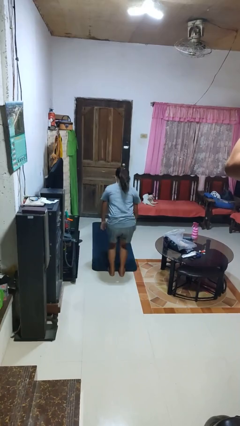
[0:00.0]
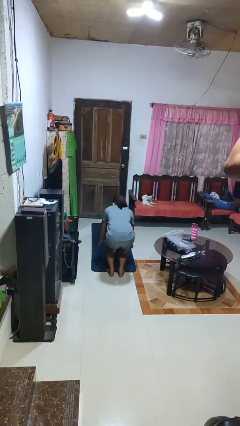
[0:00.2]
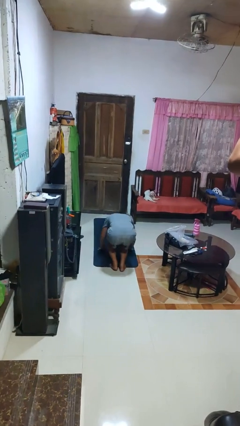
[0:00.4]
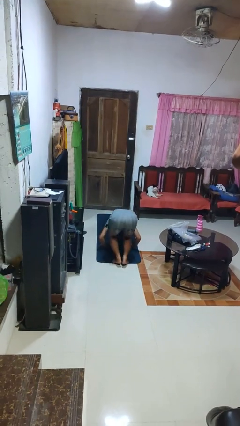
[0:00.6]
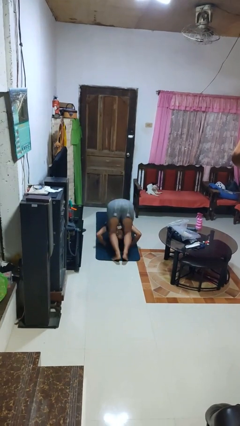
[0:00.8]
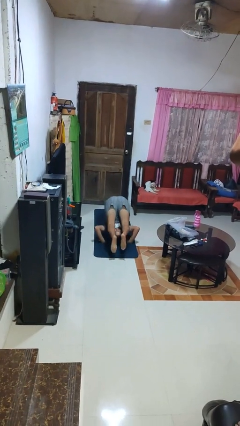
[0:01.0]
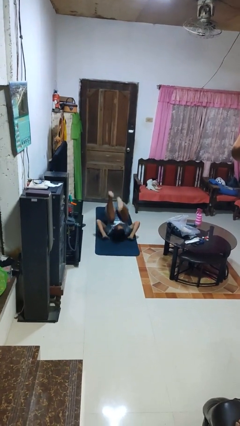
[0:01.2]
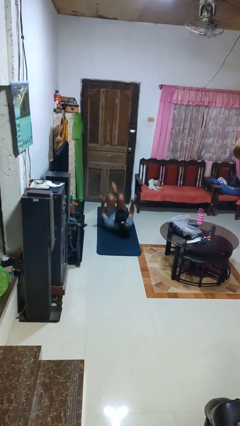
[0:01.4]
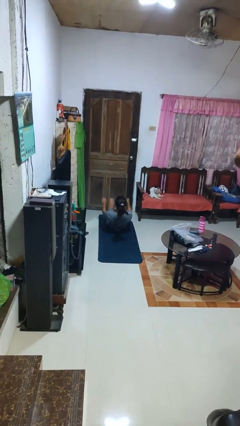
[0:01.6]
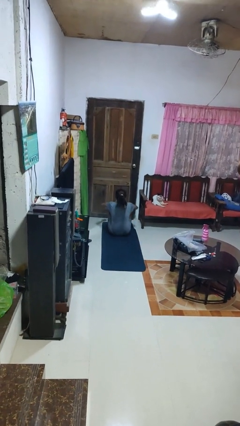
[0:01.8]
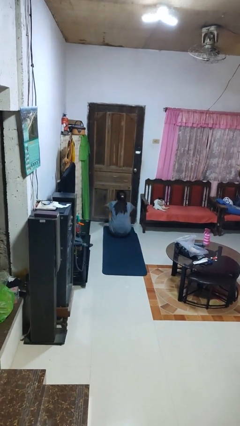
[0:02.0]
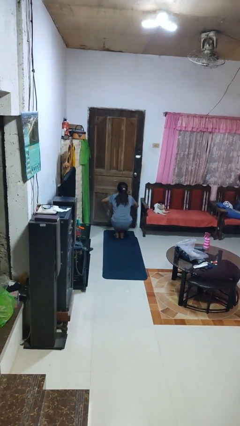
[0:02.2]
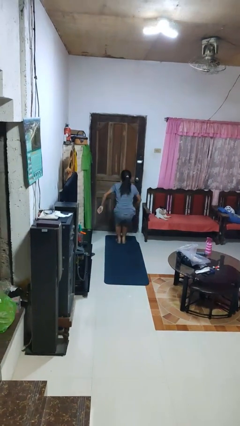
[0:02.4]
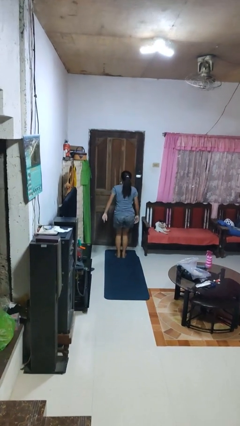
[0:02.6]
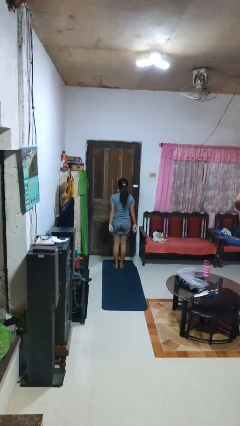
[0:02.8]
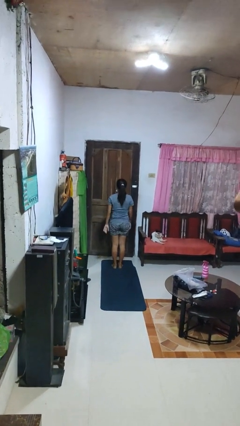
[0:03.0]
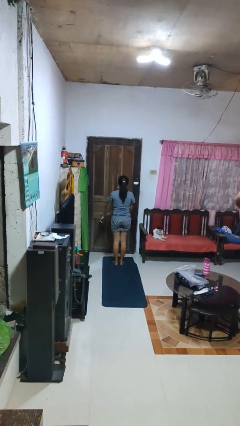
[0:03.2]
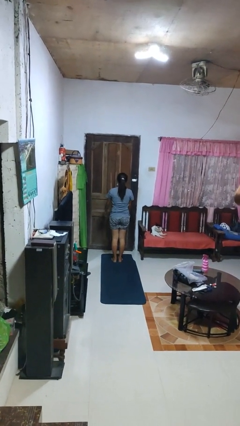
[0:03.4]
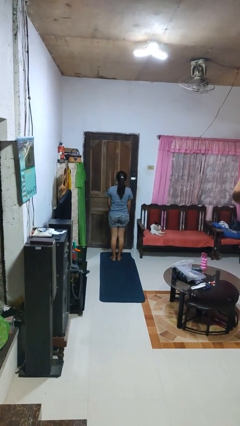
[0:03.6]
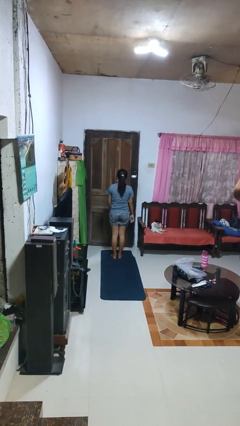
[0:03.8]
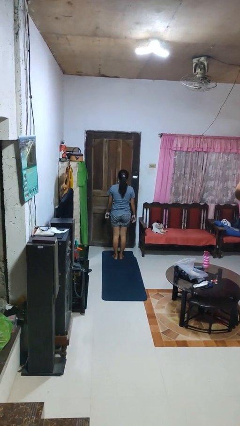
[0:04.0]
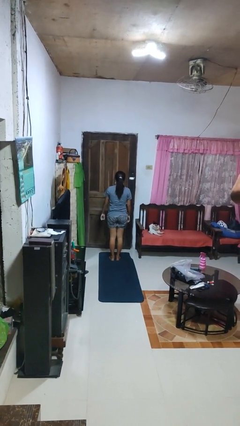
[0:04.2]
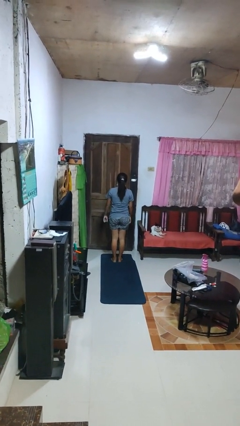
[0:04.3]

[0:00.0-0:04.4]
person somersaults

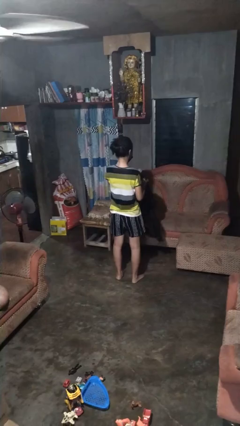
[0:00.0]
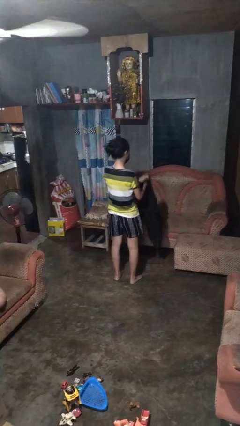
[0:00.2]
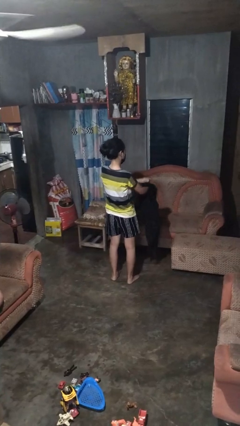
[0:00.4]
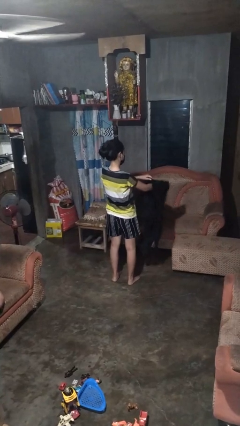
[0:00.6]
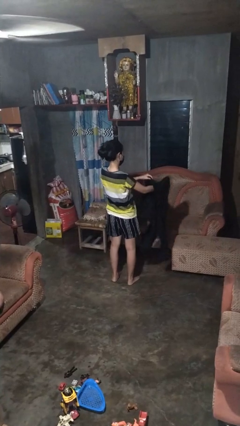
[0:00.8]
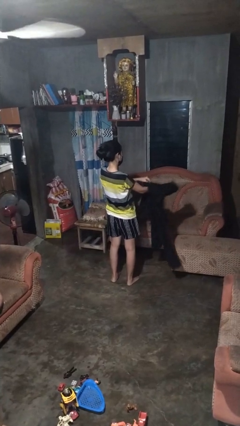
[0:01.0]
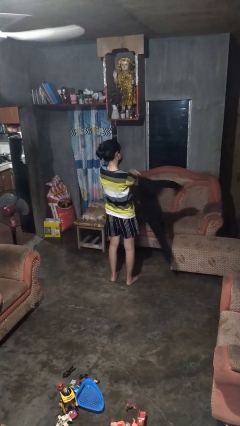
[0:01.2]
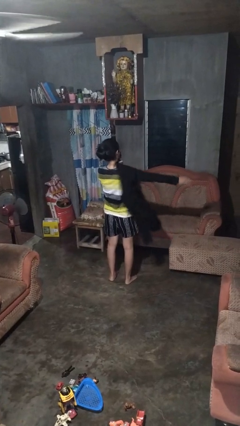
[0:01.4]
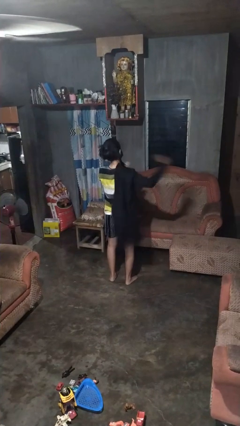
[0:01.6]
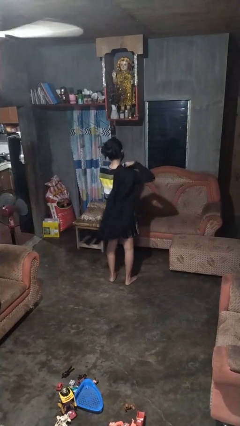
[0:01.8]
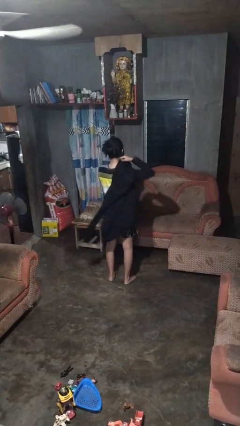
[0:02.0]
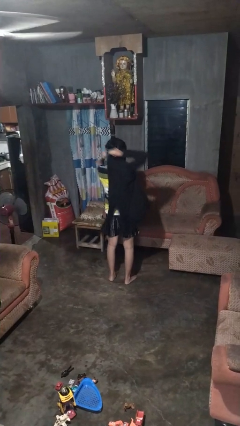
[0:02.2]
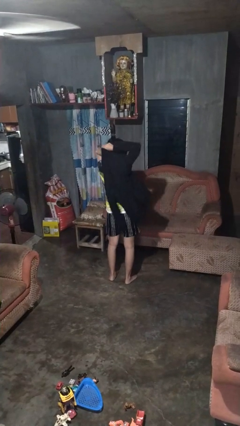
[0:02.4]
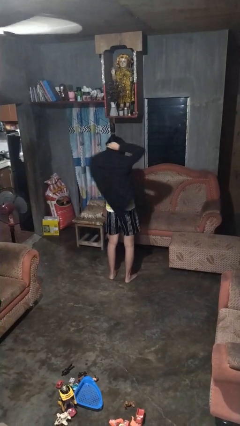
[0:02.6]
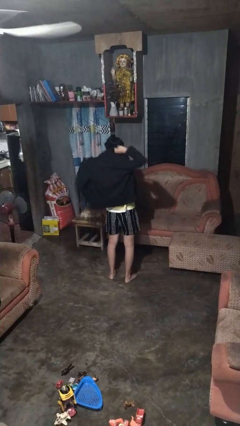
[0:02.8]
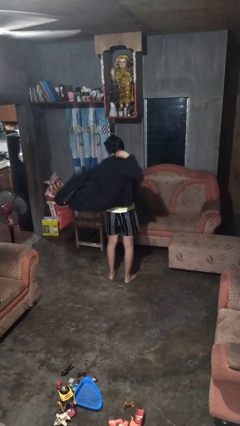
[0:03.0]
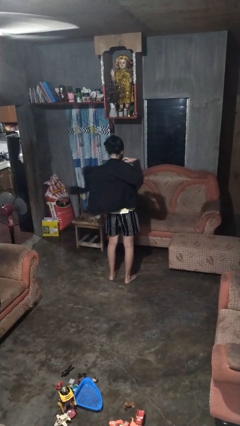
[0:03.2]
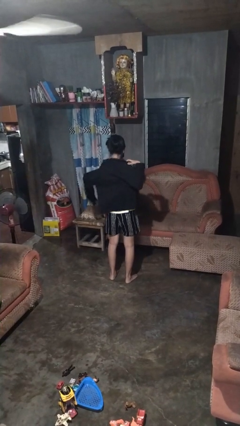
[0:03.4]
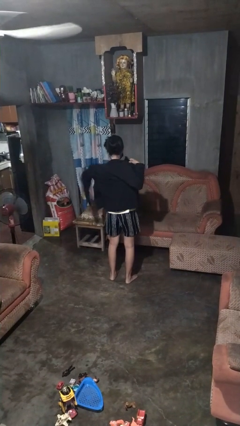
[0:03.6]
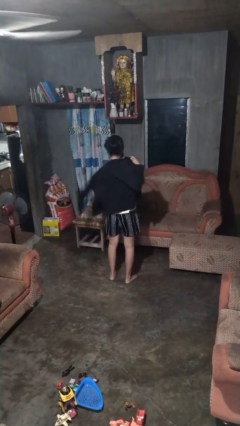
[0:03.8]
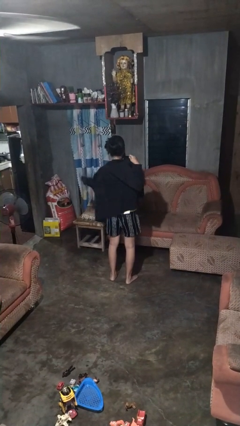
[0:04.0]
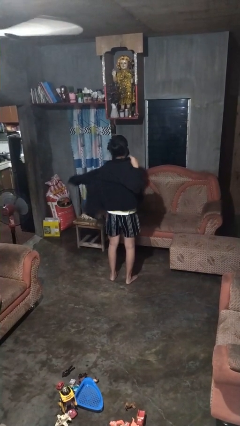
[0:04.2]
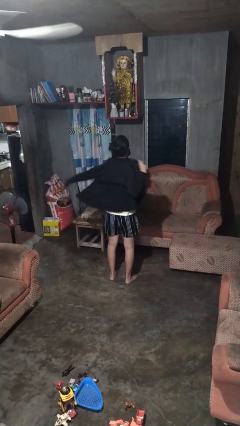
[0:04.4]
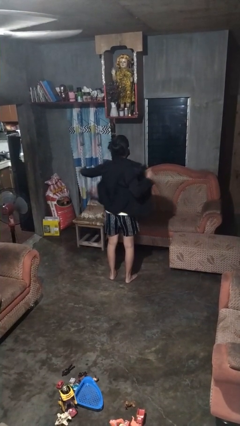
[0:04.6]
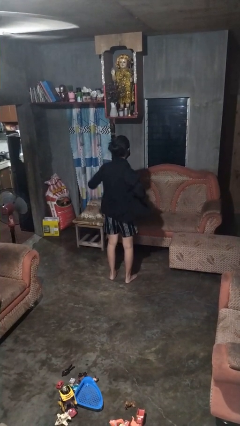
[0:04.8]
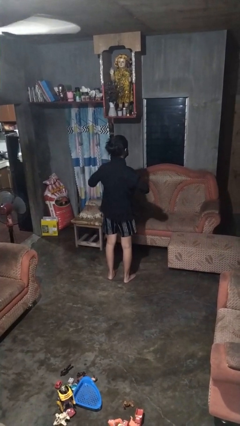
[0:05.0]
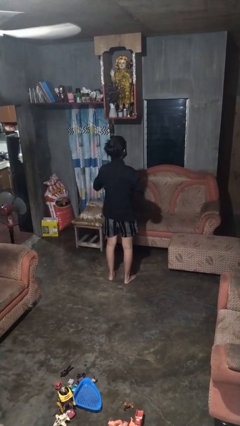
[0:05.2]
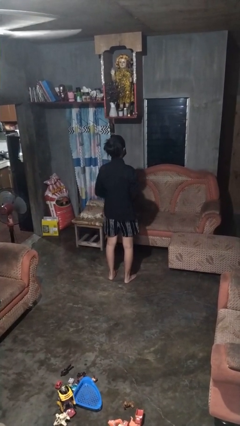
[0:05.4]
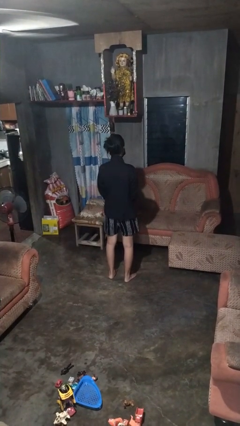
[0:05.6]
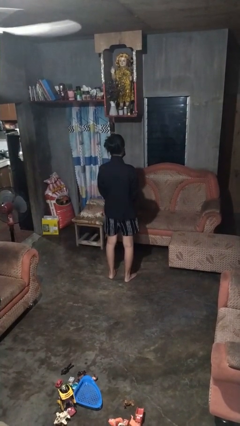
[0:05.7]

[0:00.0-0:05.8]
person puts on shirt

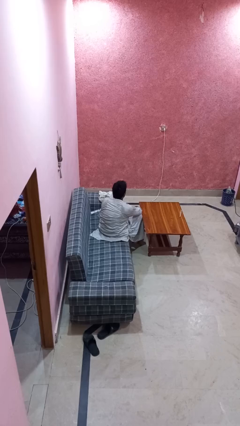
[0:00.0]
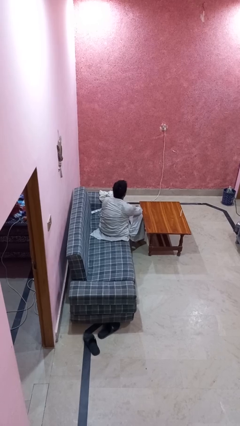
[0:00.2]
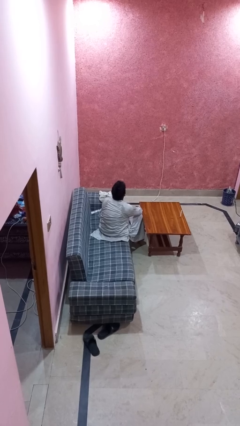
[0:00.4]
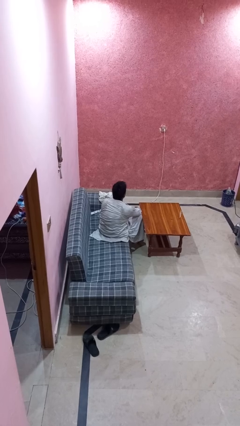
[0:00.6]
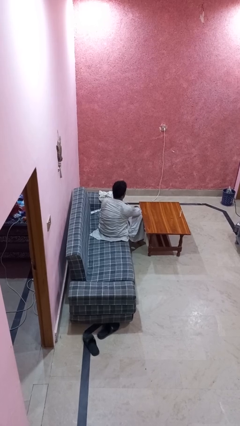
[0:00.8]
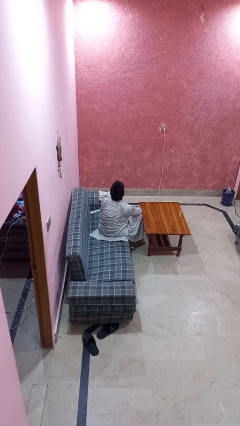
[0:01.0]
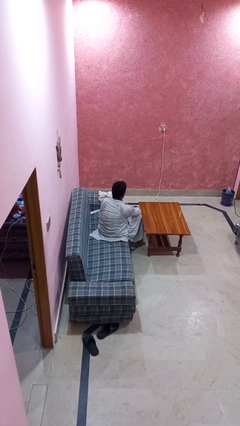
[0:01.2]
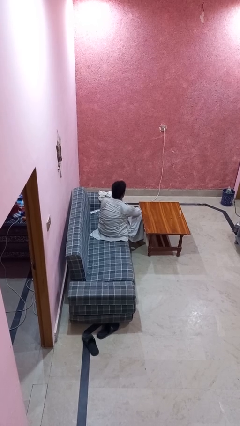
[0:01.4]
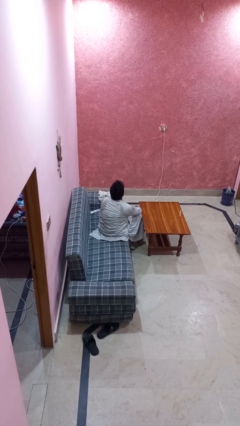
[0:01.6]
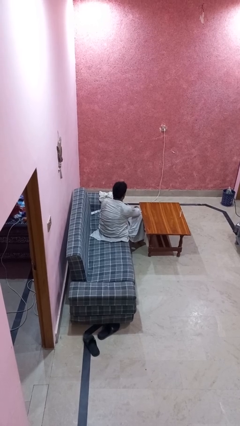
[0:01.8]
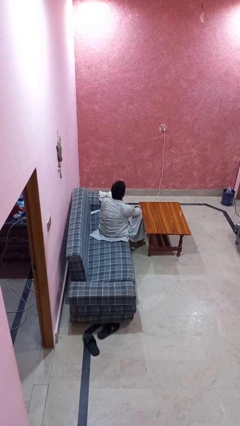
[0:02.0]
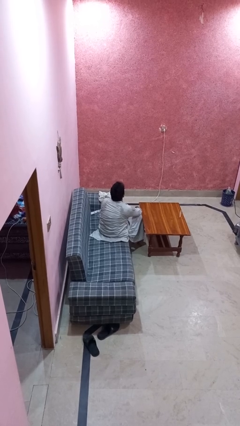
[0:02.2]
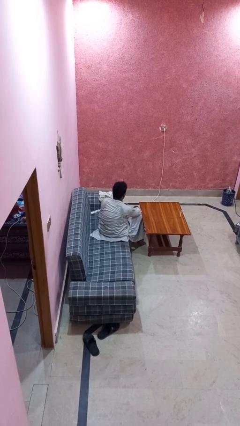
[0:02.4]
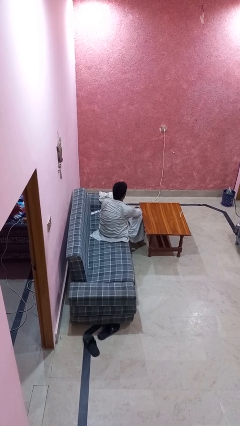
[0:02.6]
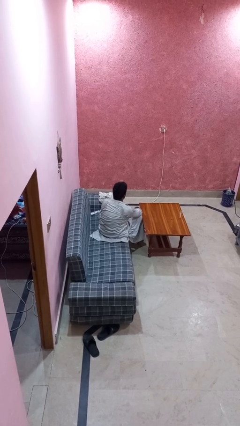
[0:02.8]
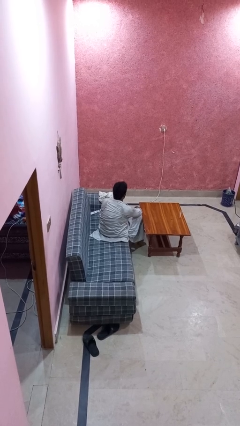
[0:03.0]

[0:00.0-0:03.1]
person nods head

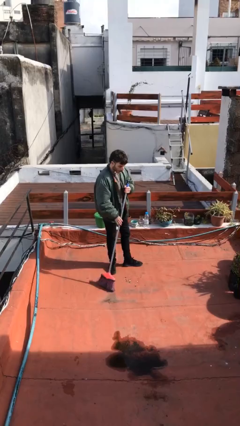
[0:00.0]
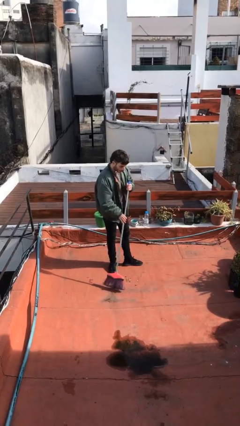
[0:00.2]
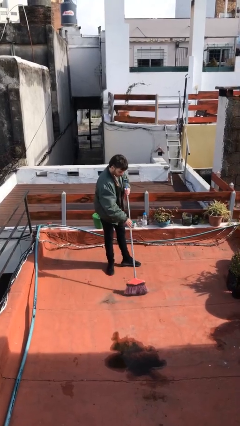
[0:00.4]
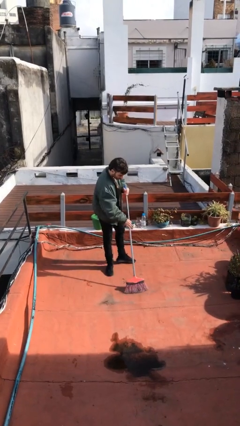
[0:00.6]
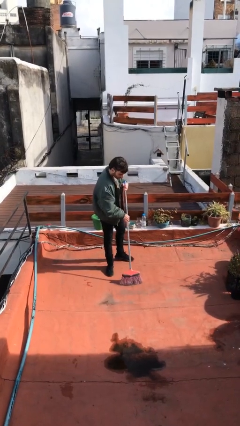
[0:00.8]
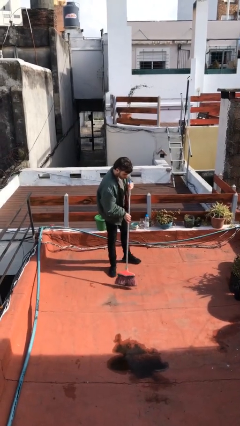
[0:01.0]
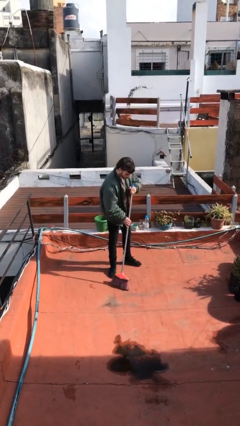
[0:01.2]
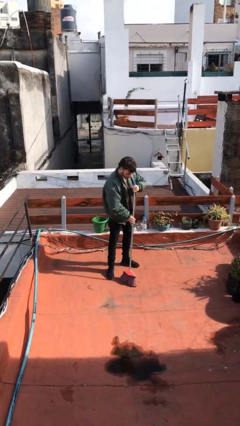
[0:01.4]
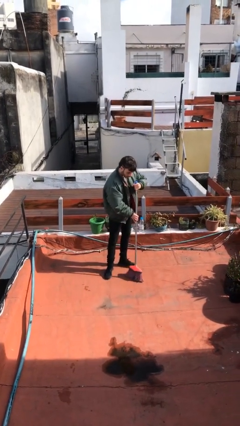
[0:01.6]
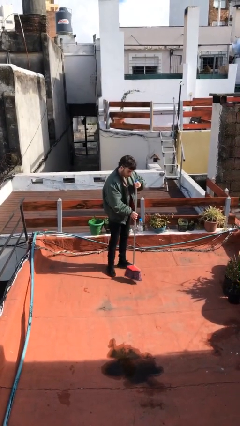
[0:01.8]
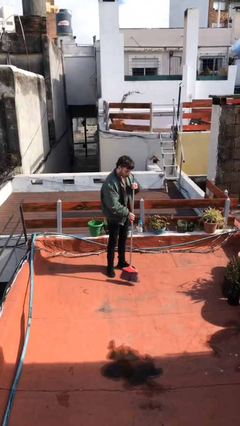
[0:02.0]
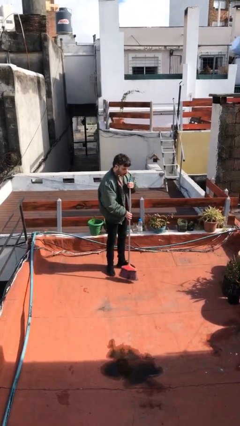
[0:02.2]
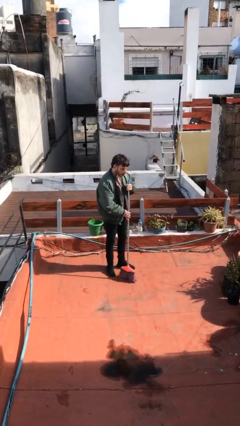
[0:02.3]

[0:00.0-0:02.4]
person sweeps floor

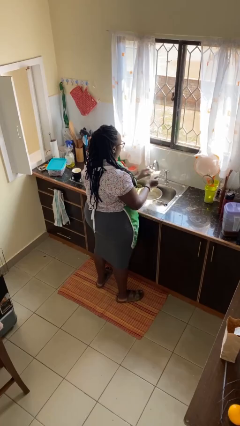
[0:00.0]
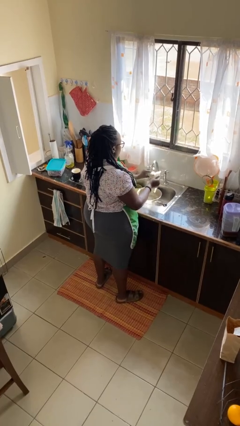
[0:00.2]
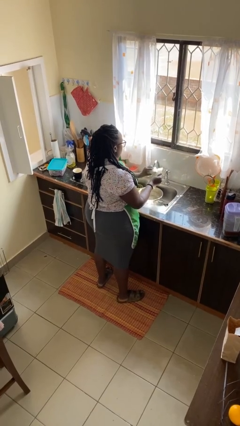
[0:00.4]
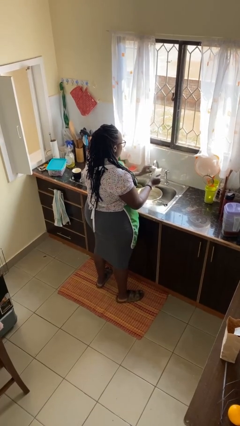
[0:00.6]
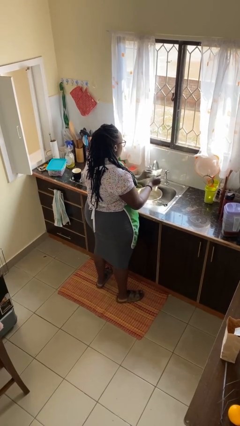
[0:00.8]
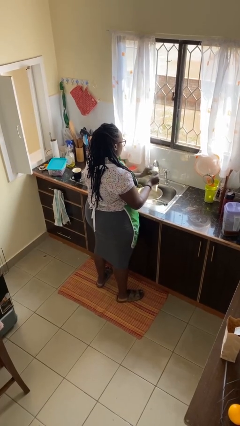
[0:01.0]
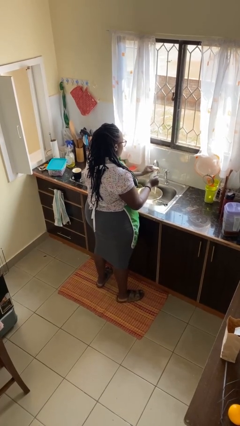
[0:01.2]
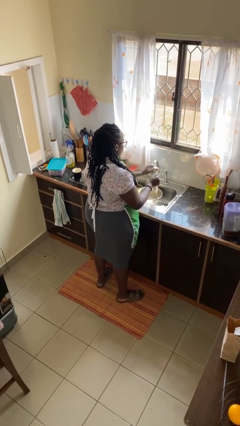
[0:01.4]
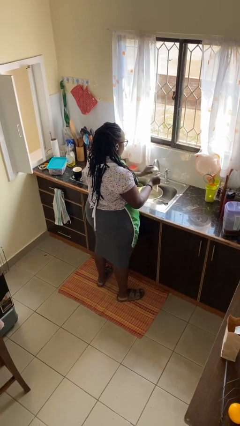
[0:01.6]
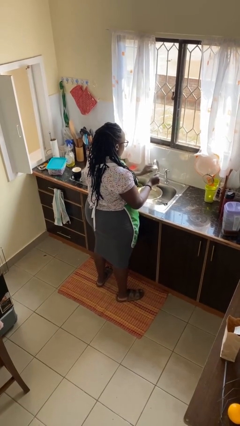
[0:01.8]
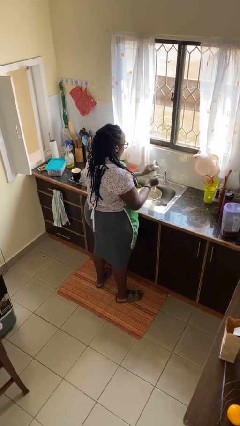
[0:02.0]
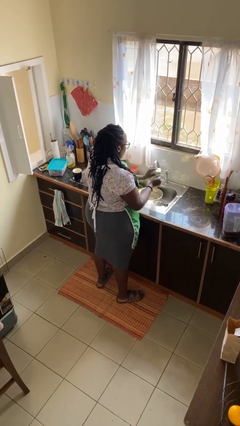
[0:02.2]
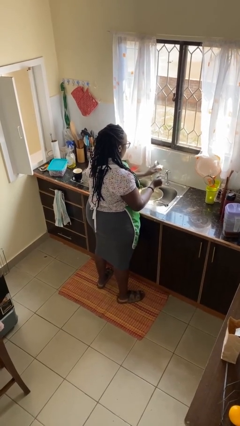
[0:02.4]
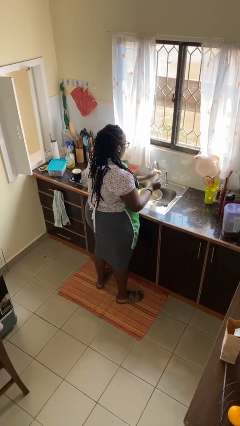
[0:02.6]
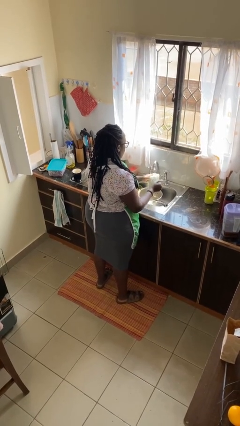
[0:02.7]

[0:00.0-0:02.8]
person washes dish
